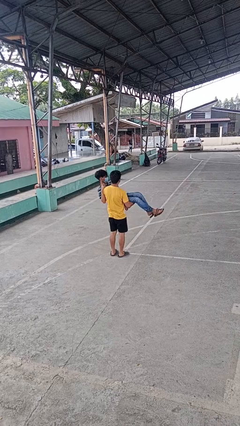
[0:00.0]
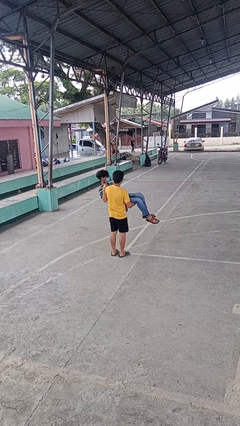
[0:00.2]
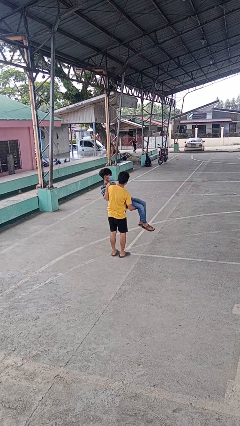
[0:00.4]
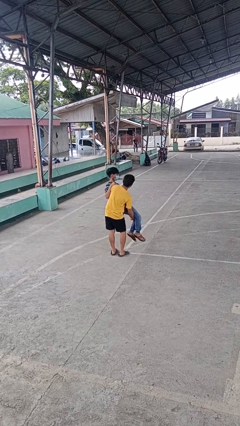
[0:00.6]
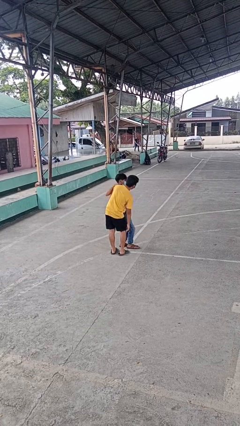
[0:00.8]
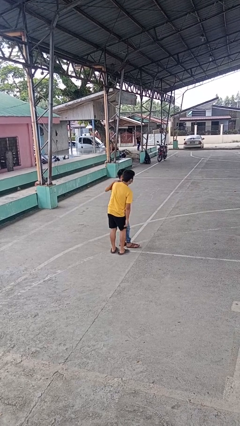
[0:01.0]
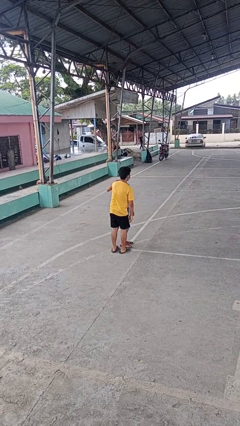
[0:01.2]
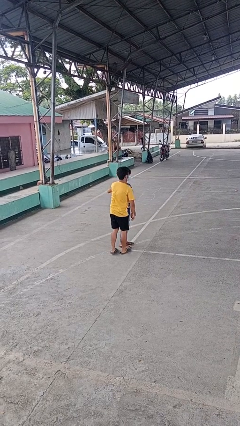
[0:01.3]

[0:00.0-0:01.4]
person puts down person

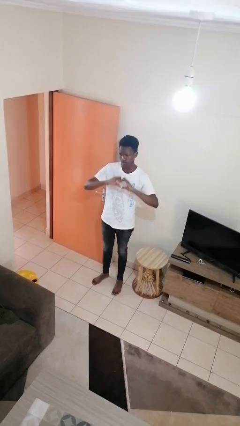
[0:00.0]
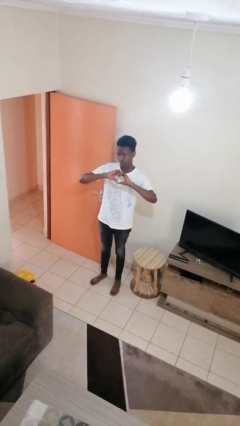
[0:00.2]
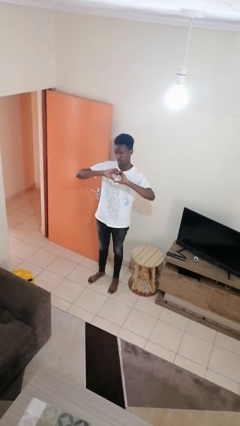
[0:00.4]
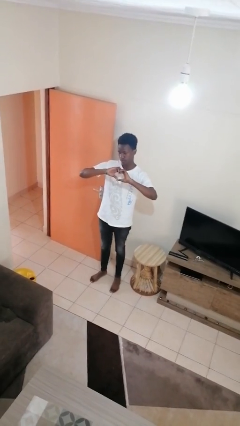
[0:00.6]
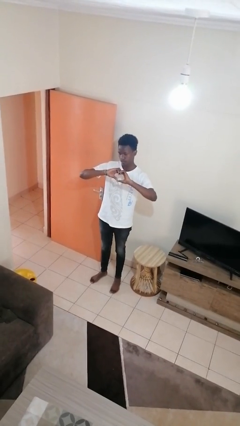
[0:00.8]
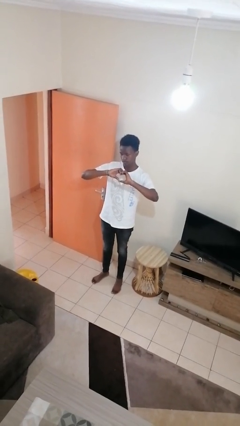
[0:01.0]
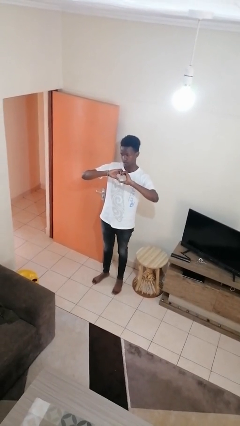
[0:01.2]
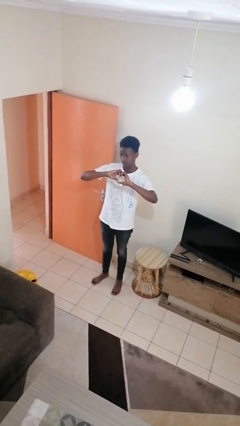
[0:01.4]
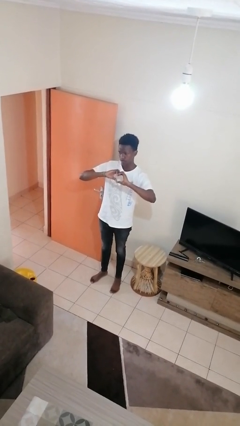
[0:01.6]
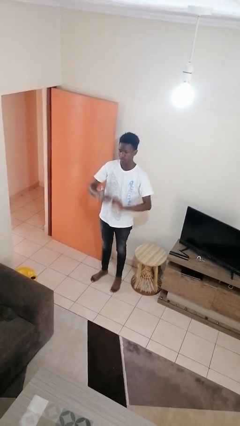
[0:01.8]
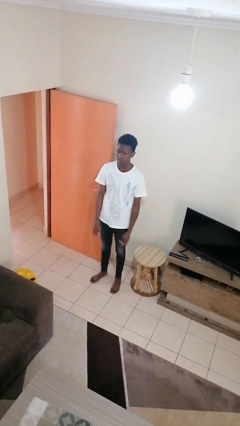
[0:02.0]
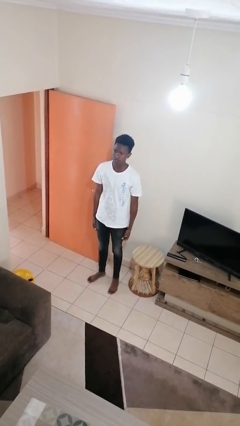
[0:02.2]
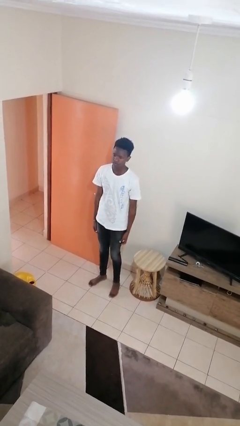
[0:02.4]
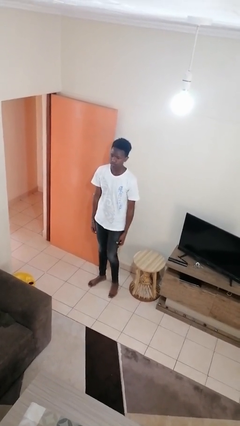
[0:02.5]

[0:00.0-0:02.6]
person gestures heart

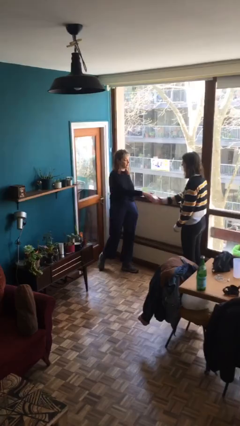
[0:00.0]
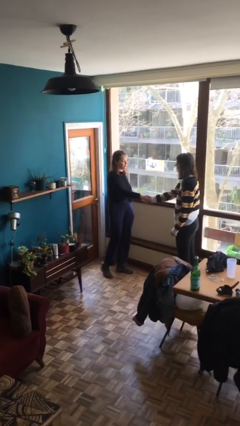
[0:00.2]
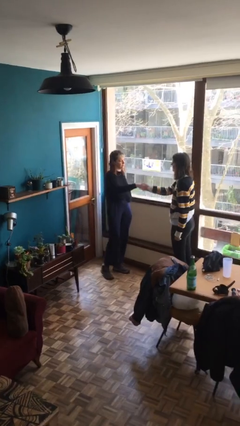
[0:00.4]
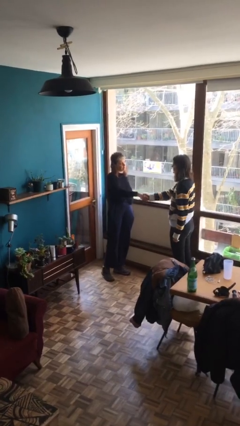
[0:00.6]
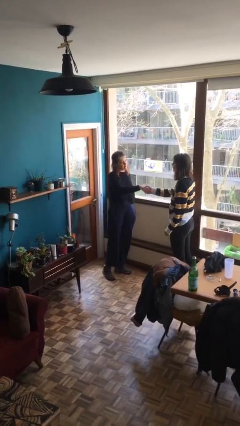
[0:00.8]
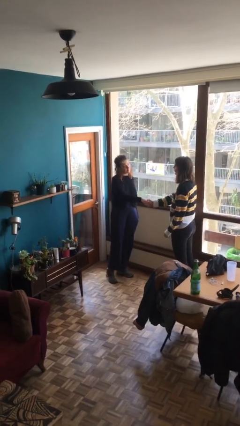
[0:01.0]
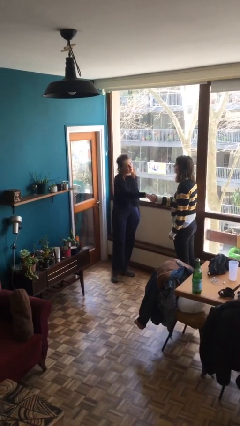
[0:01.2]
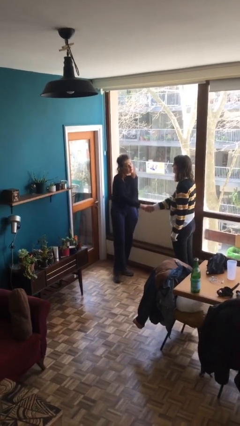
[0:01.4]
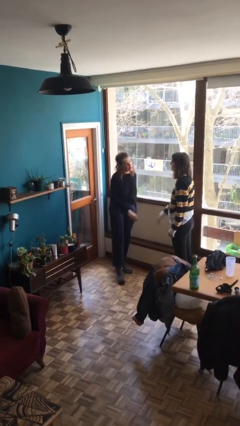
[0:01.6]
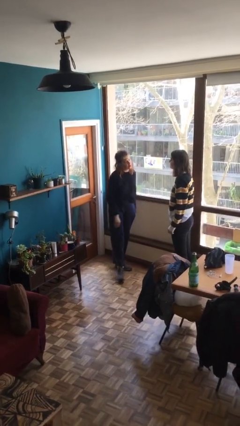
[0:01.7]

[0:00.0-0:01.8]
person shakes hand

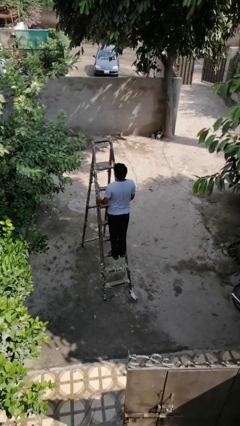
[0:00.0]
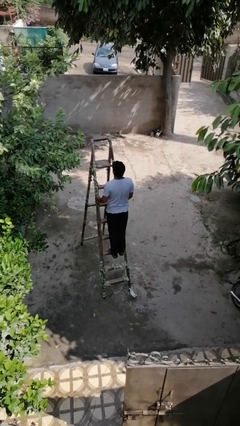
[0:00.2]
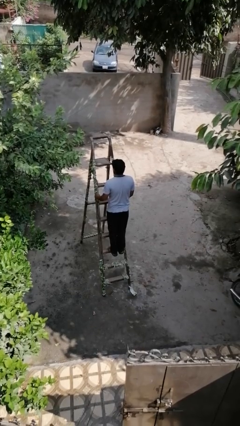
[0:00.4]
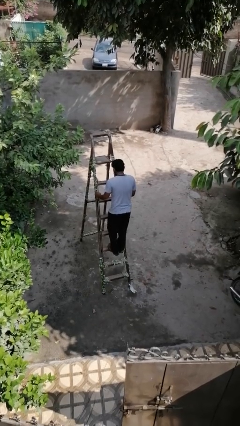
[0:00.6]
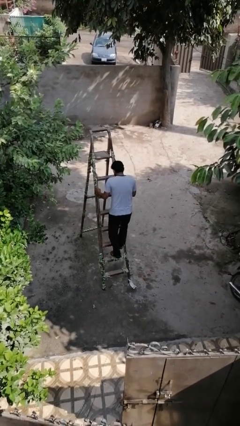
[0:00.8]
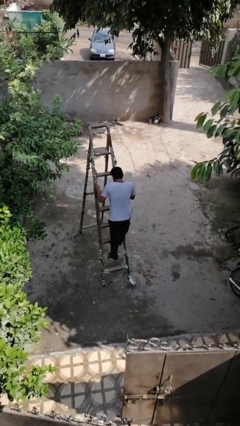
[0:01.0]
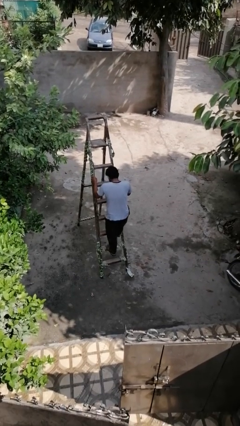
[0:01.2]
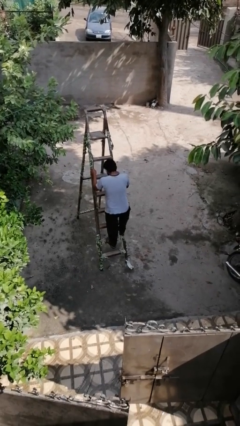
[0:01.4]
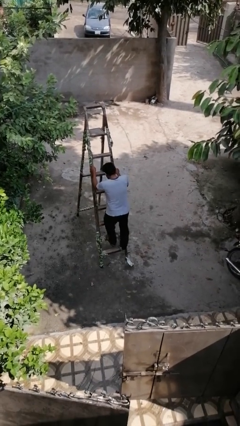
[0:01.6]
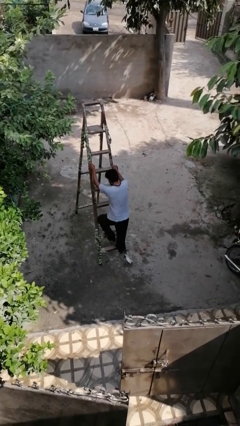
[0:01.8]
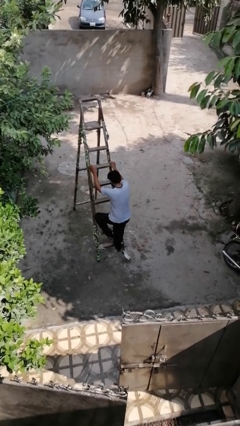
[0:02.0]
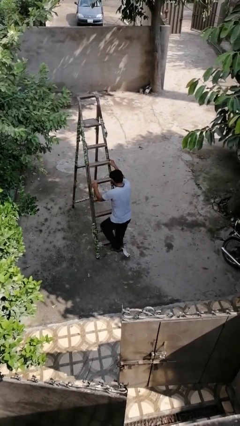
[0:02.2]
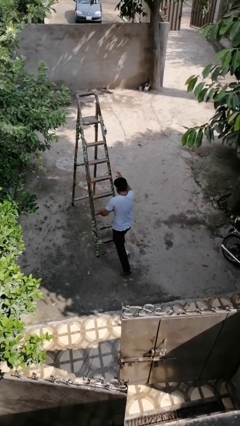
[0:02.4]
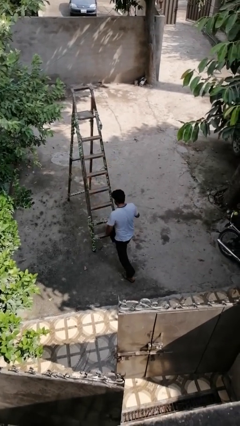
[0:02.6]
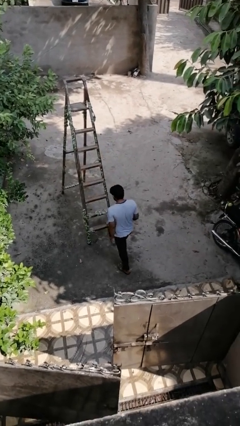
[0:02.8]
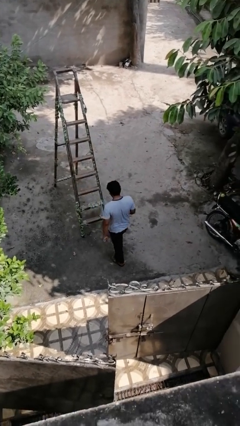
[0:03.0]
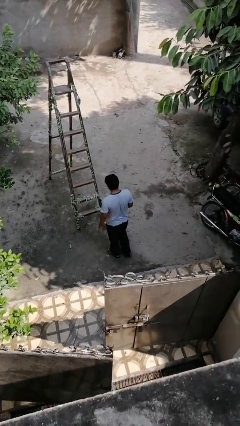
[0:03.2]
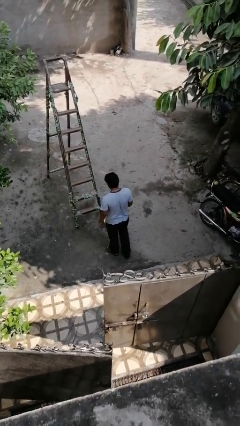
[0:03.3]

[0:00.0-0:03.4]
person climbs down ladder

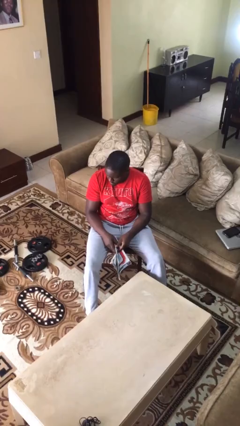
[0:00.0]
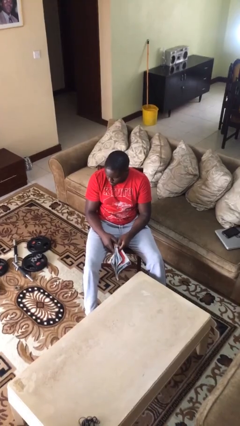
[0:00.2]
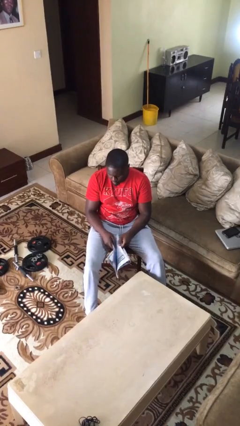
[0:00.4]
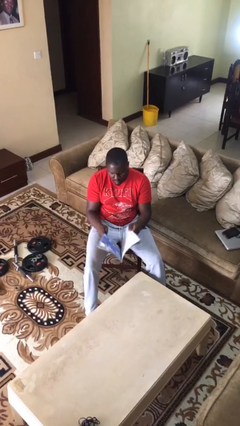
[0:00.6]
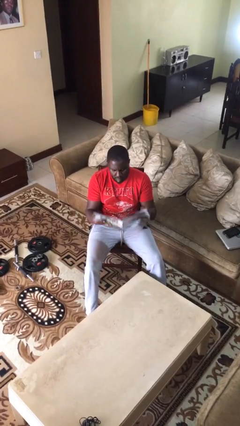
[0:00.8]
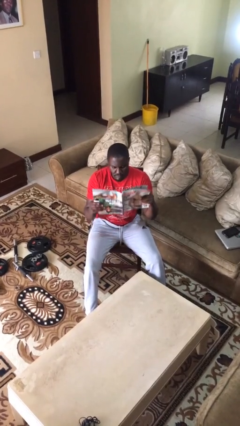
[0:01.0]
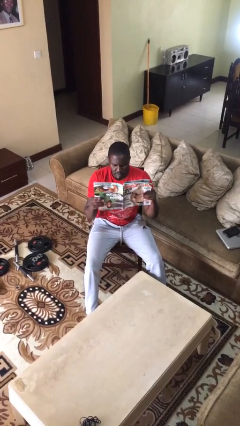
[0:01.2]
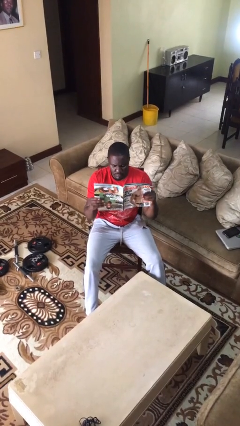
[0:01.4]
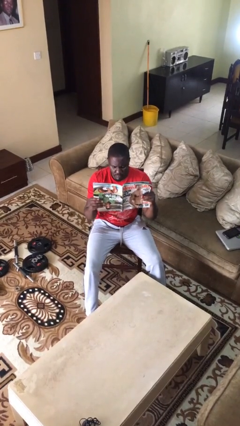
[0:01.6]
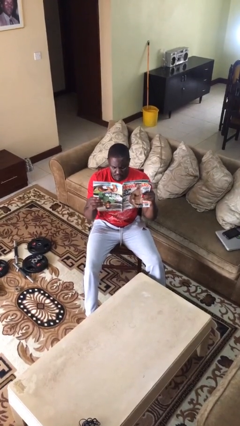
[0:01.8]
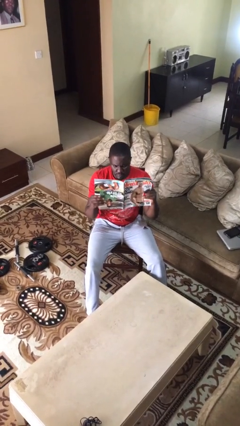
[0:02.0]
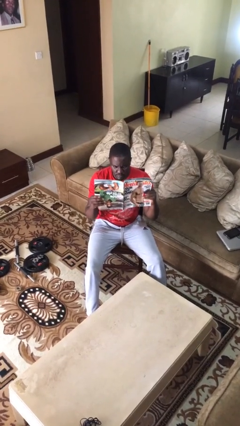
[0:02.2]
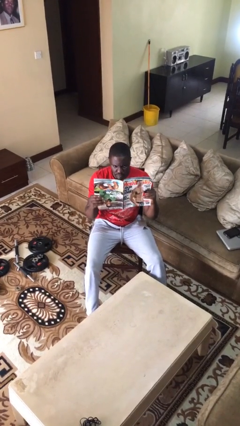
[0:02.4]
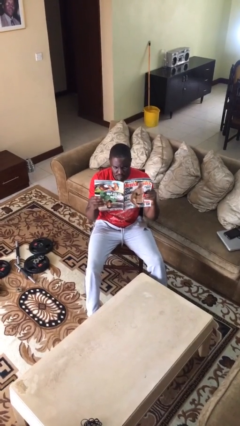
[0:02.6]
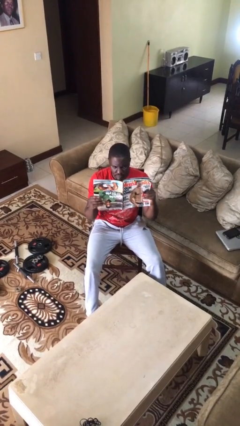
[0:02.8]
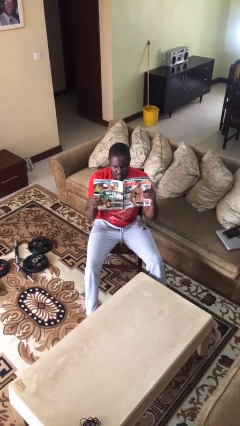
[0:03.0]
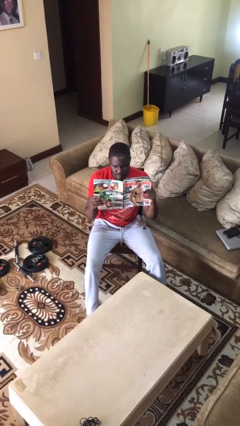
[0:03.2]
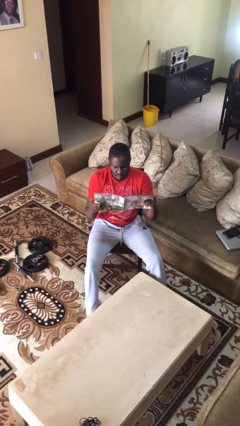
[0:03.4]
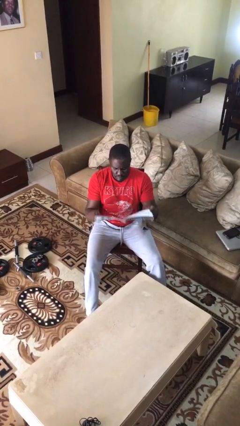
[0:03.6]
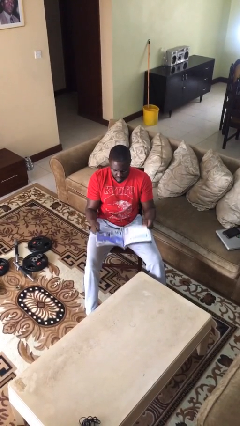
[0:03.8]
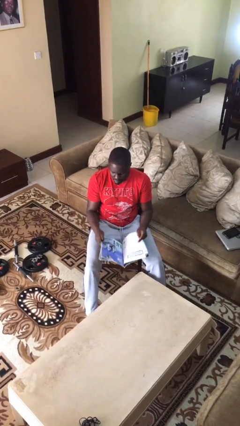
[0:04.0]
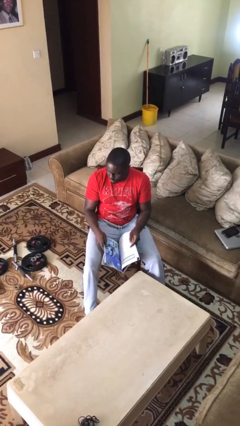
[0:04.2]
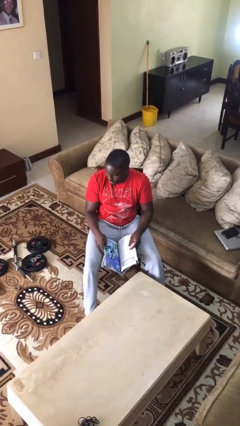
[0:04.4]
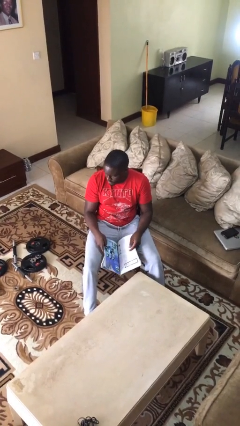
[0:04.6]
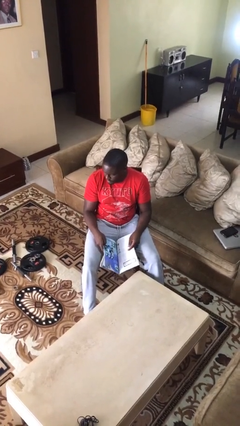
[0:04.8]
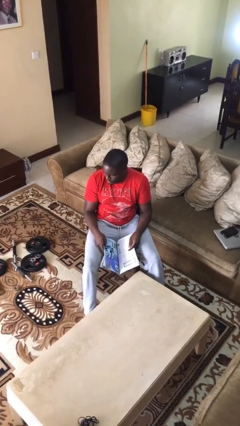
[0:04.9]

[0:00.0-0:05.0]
person reads document

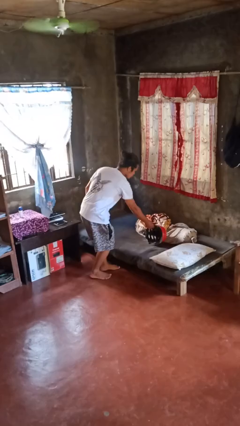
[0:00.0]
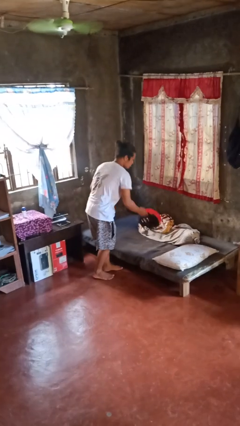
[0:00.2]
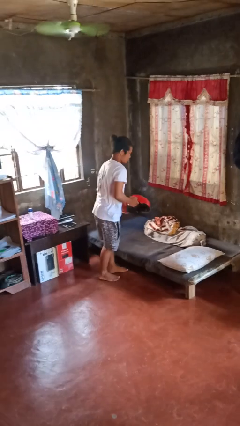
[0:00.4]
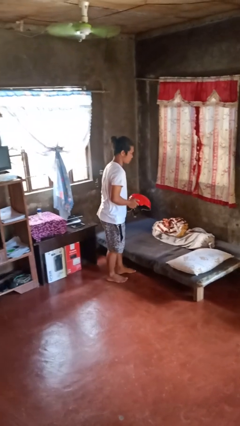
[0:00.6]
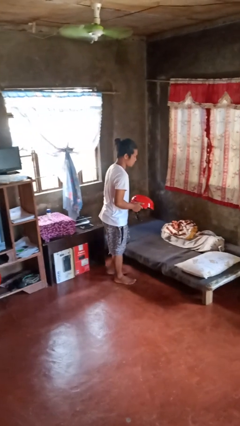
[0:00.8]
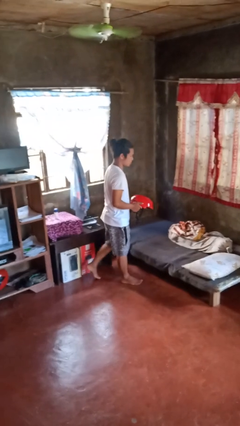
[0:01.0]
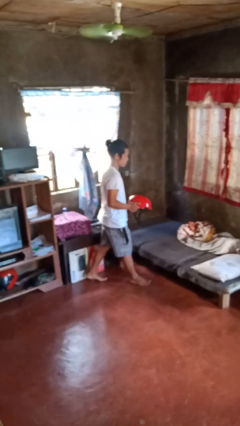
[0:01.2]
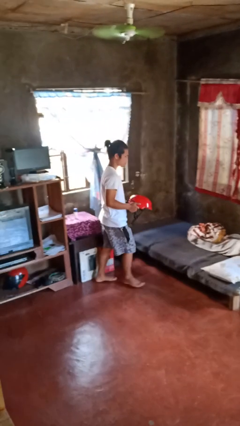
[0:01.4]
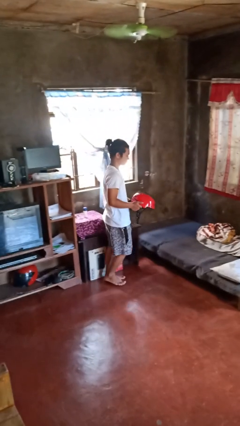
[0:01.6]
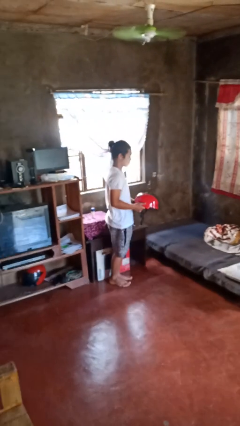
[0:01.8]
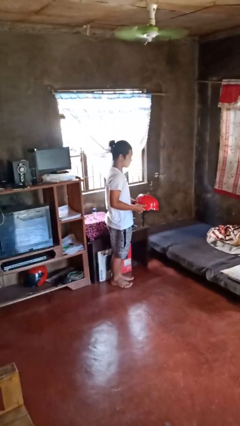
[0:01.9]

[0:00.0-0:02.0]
person picks up object from bed

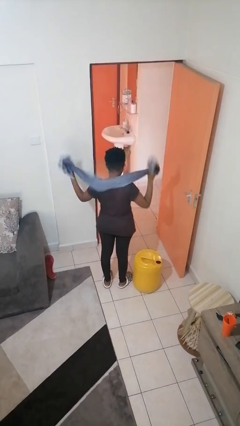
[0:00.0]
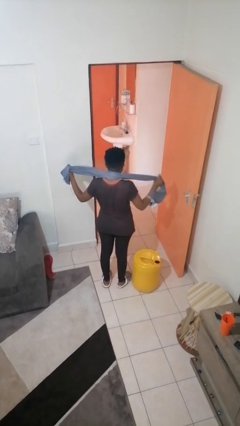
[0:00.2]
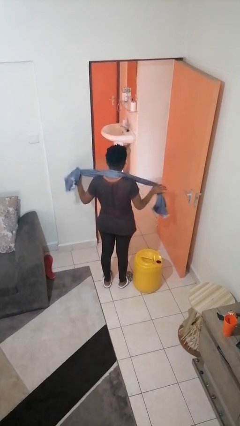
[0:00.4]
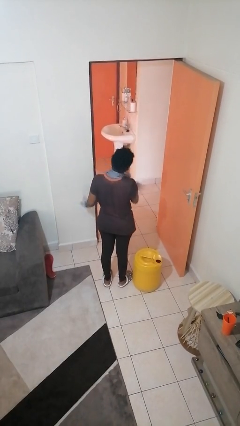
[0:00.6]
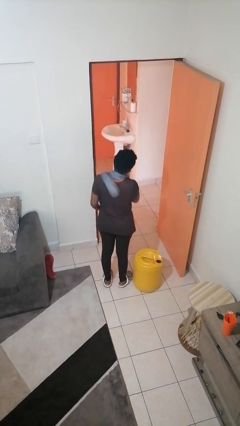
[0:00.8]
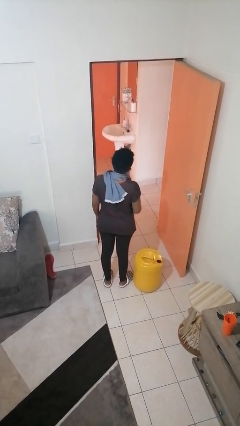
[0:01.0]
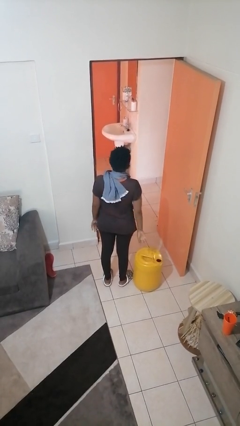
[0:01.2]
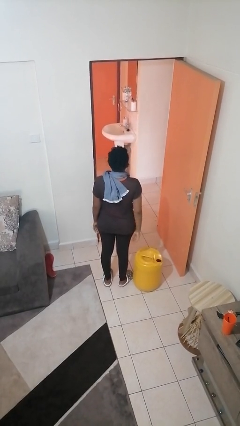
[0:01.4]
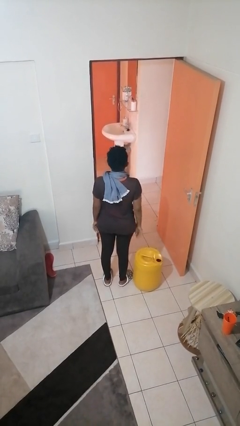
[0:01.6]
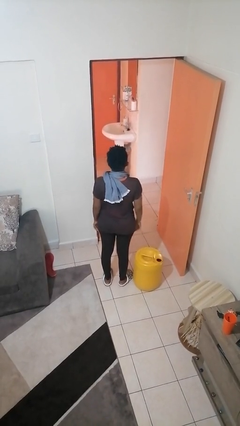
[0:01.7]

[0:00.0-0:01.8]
person puts on scarf
